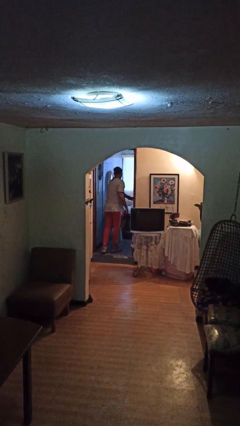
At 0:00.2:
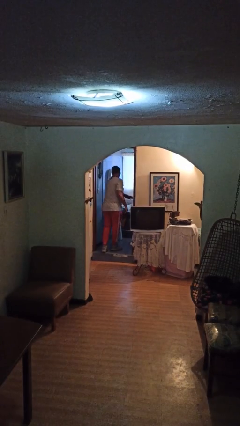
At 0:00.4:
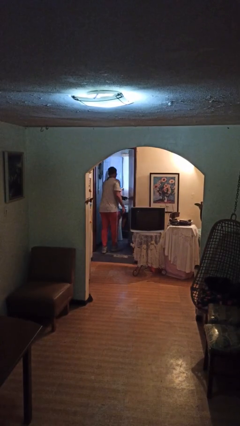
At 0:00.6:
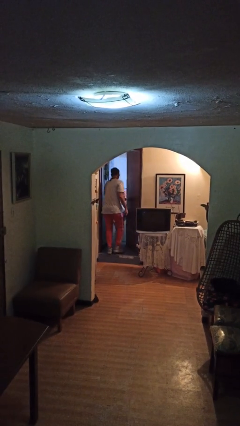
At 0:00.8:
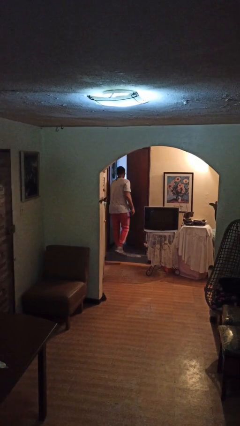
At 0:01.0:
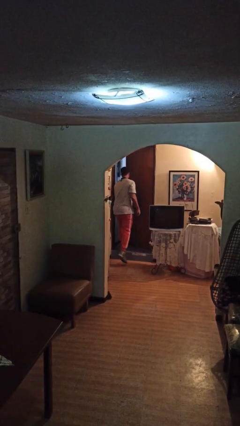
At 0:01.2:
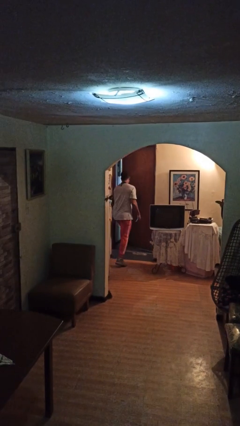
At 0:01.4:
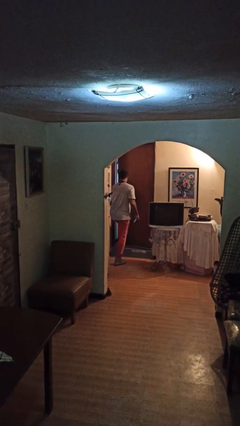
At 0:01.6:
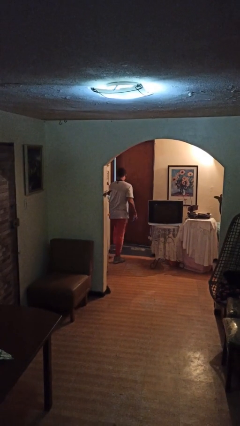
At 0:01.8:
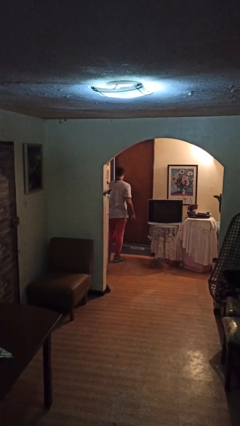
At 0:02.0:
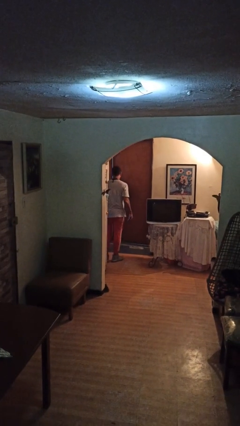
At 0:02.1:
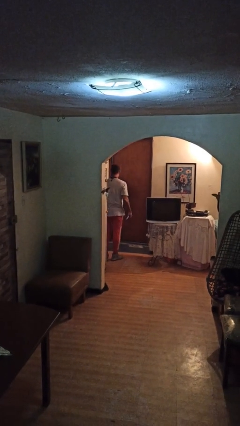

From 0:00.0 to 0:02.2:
person closes facility door

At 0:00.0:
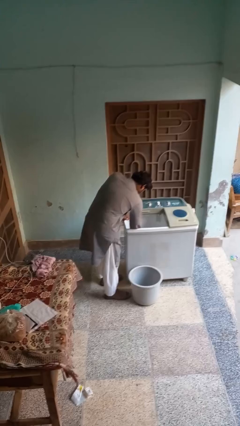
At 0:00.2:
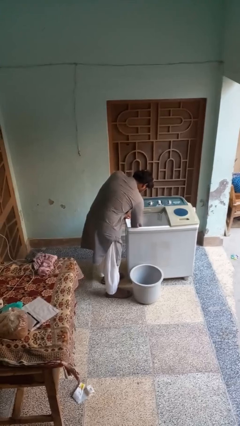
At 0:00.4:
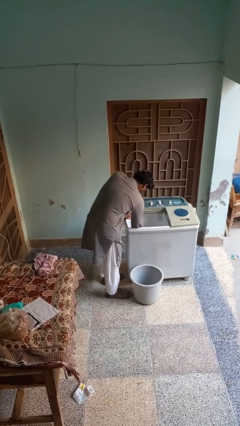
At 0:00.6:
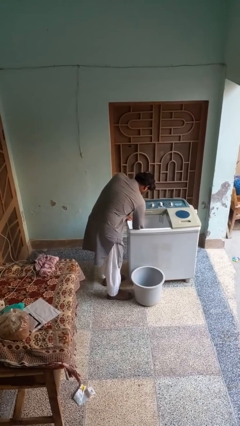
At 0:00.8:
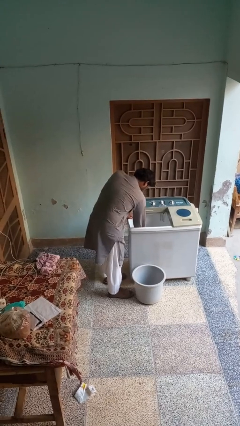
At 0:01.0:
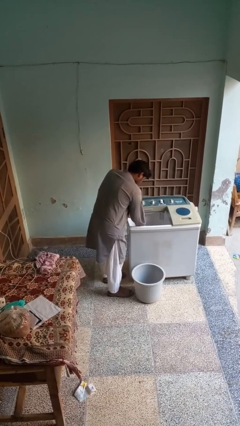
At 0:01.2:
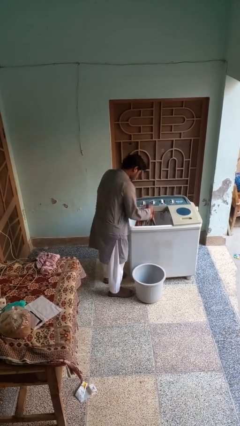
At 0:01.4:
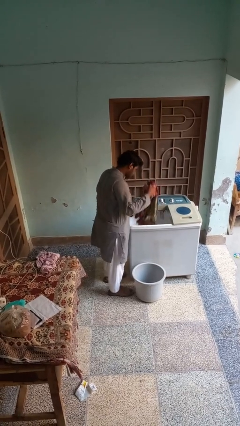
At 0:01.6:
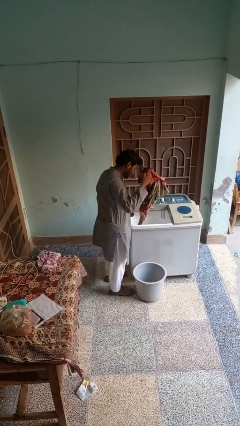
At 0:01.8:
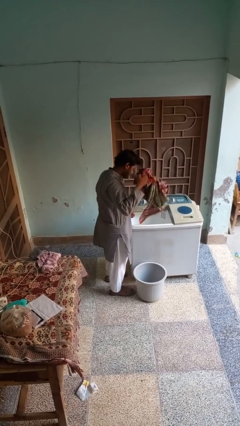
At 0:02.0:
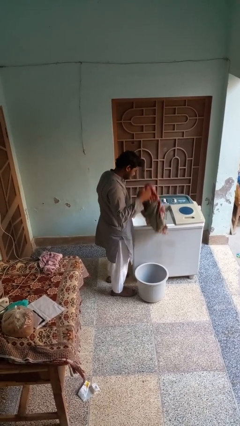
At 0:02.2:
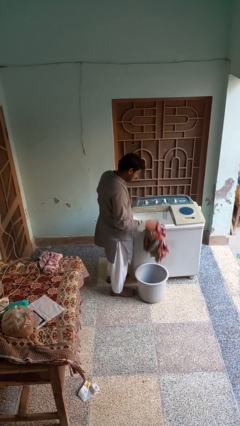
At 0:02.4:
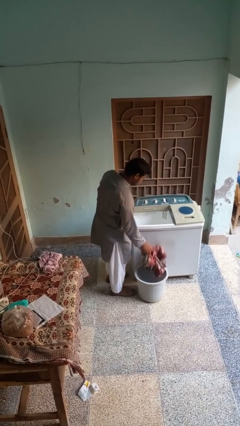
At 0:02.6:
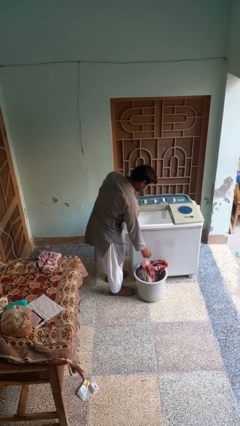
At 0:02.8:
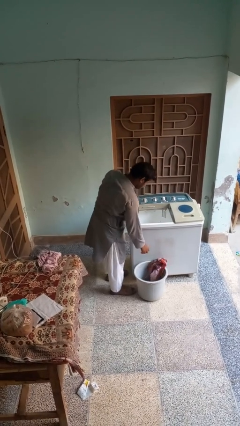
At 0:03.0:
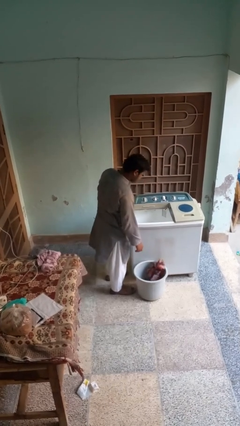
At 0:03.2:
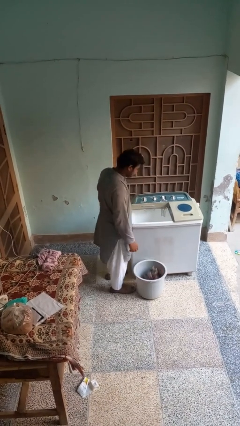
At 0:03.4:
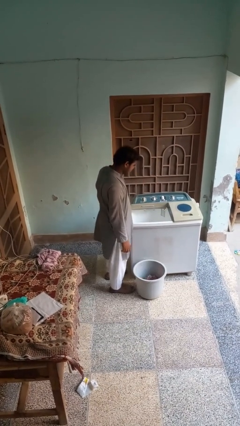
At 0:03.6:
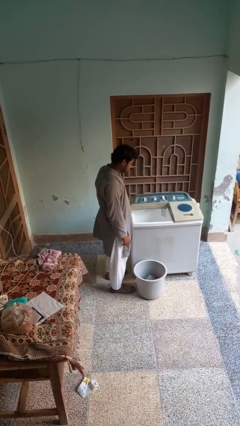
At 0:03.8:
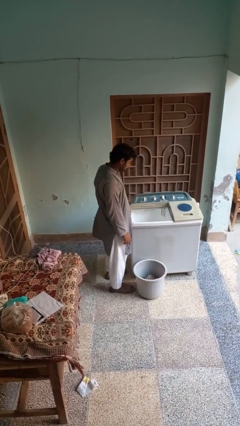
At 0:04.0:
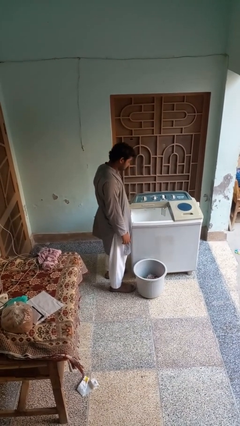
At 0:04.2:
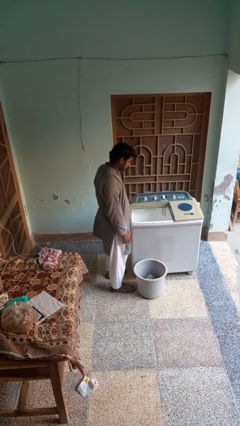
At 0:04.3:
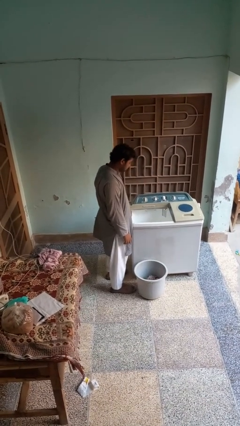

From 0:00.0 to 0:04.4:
person unloads clotheswasher

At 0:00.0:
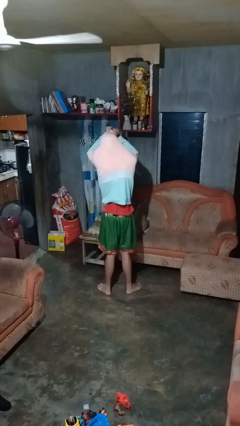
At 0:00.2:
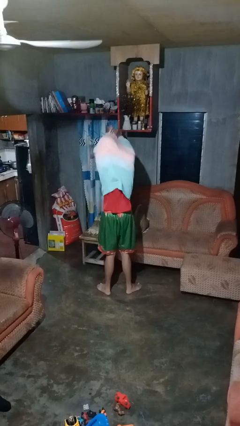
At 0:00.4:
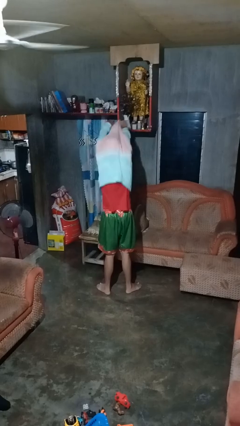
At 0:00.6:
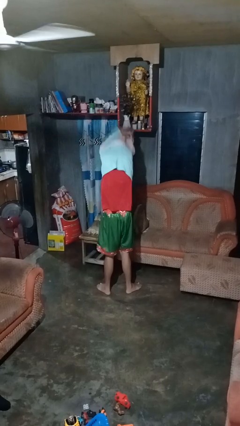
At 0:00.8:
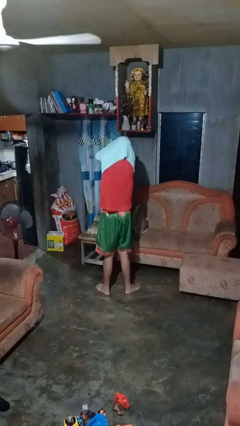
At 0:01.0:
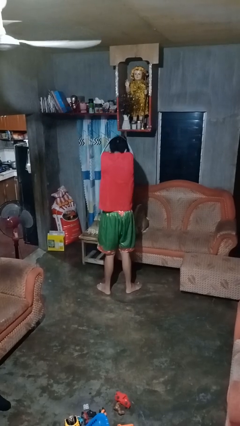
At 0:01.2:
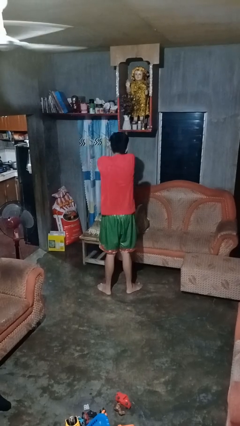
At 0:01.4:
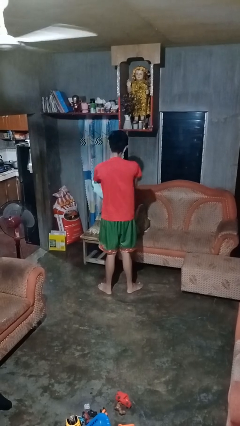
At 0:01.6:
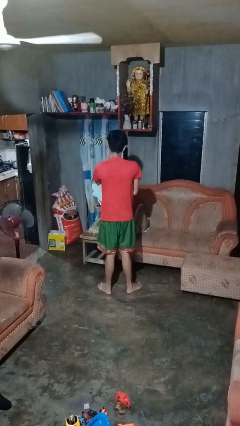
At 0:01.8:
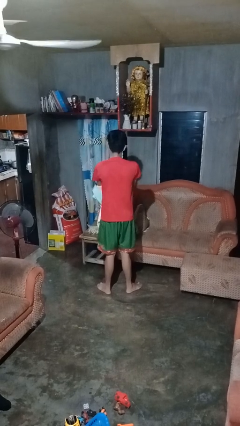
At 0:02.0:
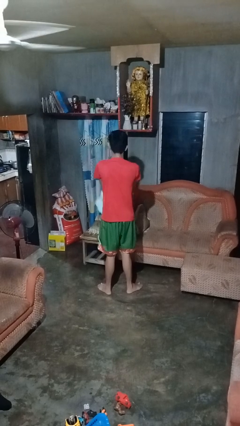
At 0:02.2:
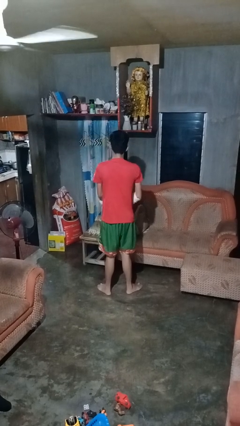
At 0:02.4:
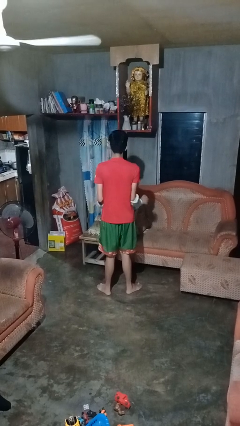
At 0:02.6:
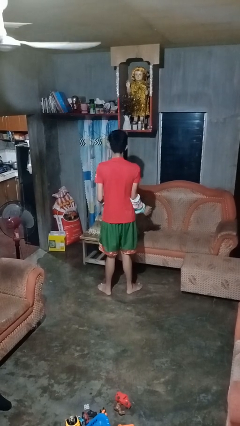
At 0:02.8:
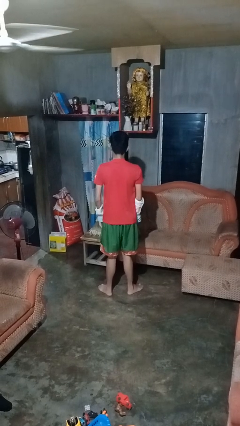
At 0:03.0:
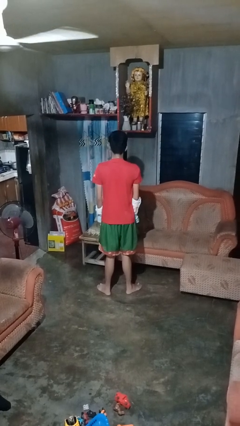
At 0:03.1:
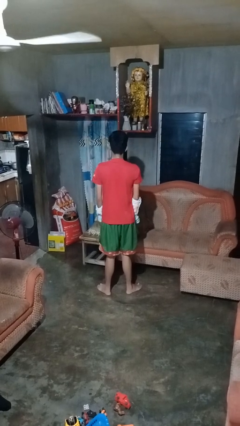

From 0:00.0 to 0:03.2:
person takes off hoodie

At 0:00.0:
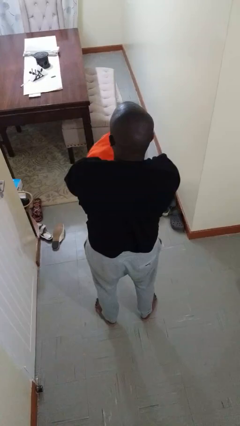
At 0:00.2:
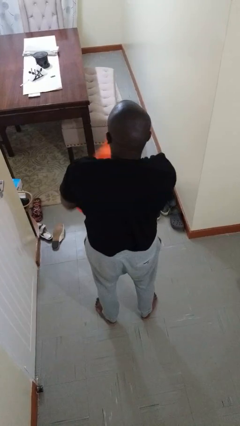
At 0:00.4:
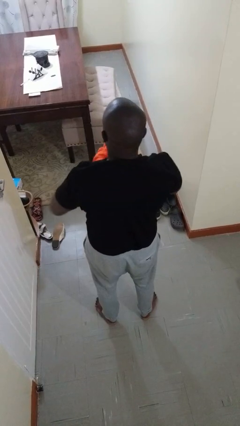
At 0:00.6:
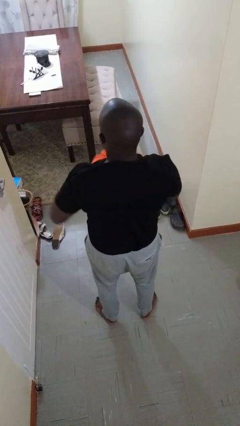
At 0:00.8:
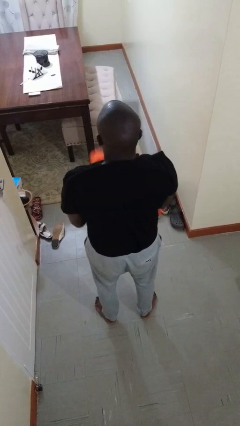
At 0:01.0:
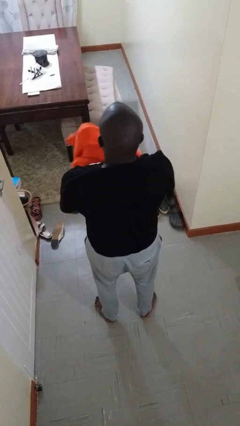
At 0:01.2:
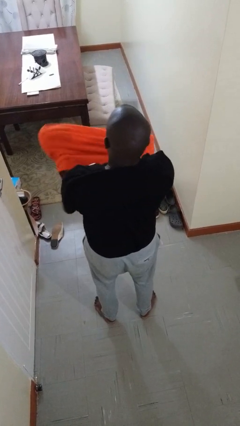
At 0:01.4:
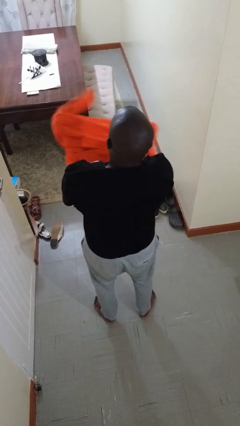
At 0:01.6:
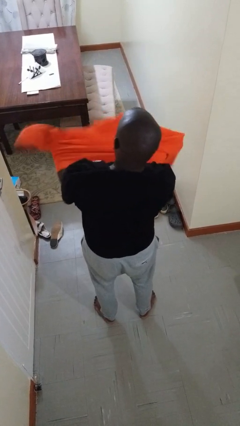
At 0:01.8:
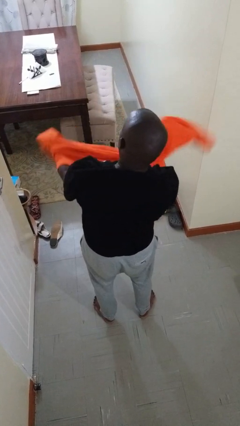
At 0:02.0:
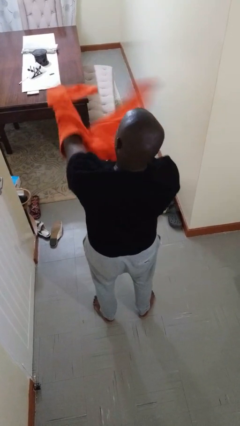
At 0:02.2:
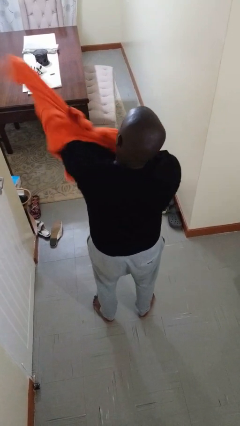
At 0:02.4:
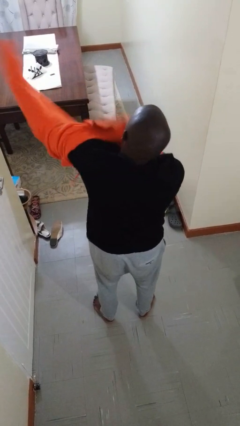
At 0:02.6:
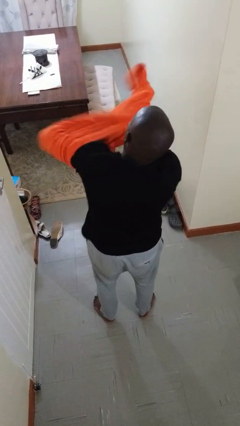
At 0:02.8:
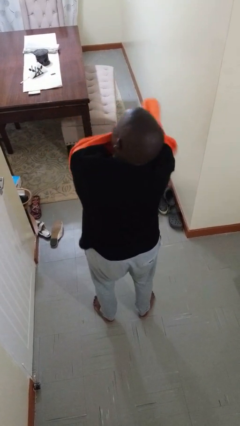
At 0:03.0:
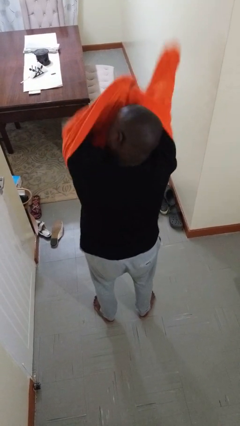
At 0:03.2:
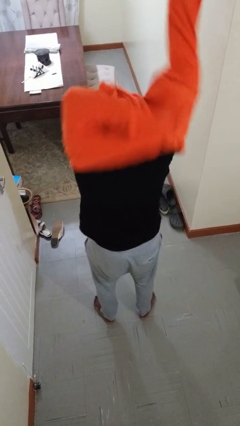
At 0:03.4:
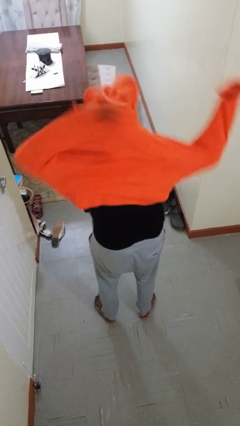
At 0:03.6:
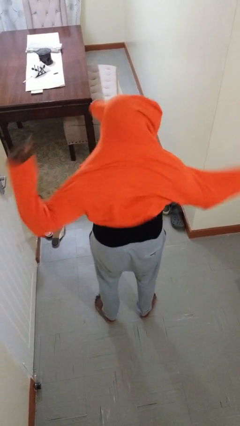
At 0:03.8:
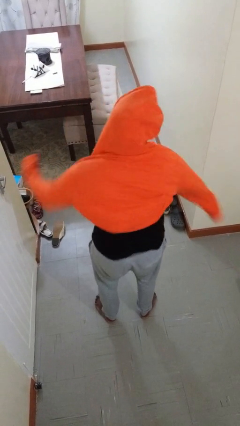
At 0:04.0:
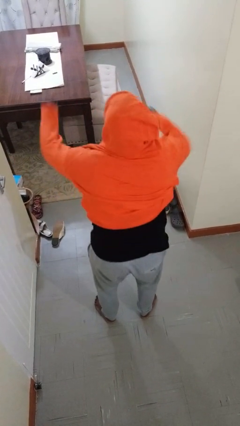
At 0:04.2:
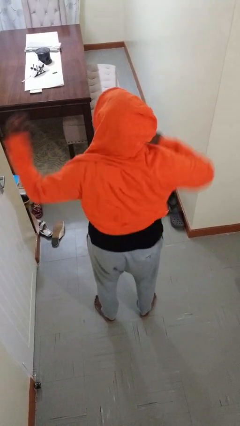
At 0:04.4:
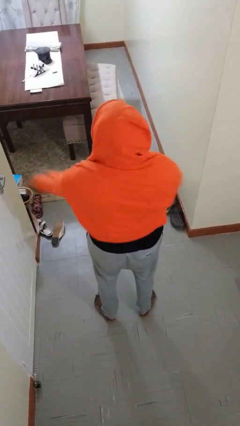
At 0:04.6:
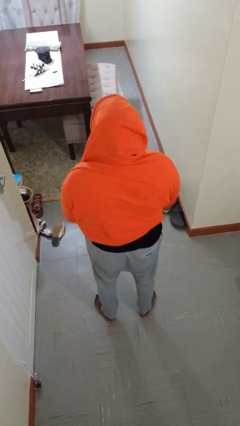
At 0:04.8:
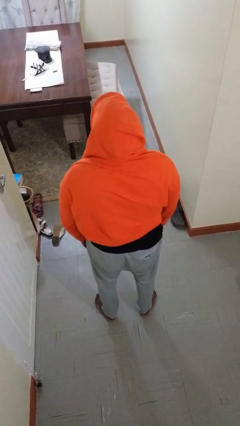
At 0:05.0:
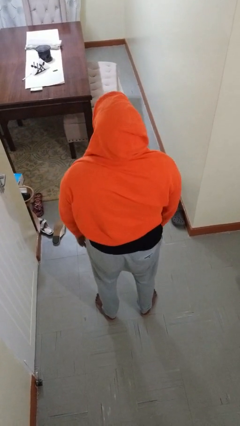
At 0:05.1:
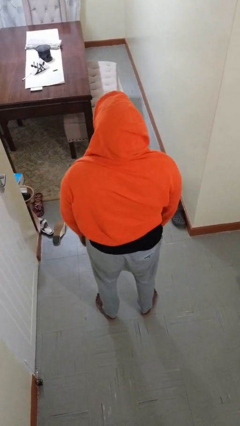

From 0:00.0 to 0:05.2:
person puts on hoodie

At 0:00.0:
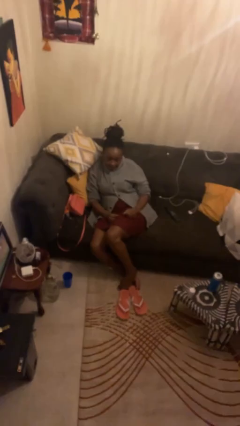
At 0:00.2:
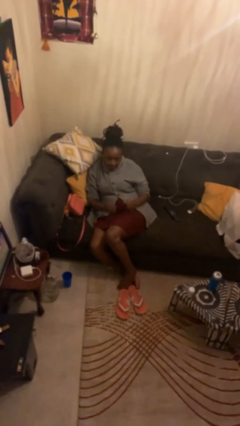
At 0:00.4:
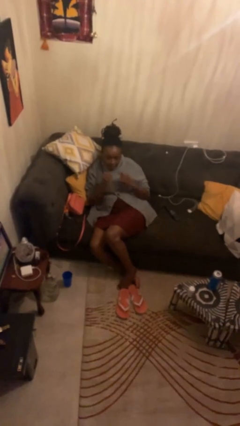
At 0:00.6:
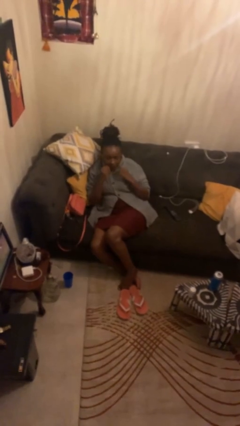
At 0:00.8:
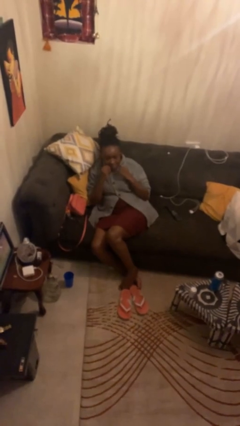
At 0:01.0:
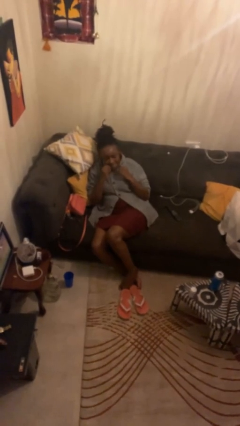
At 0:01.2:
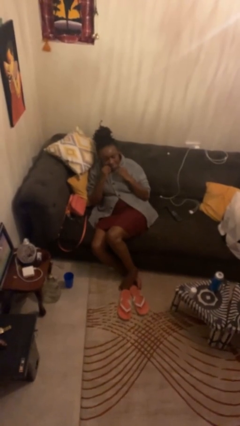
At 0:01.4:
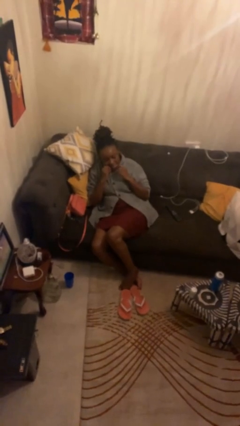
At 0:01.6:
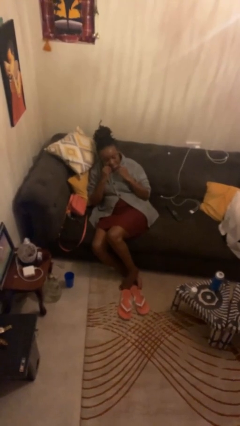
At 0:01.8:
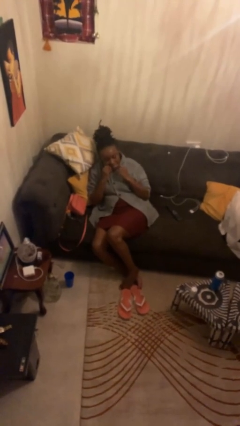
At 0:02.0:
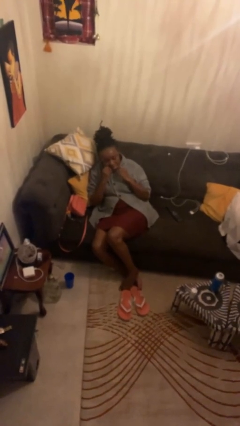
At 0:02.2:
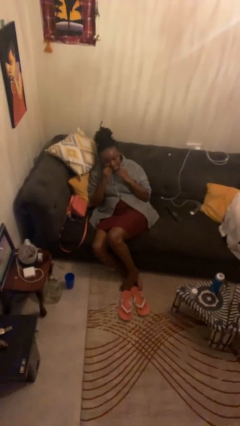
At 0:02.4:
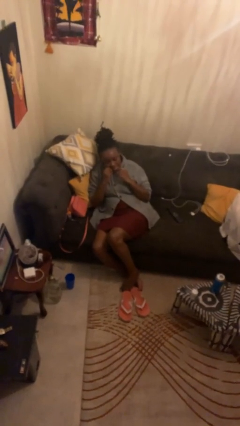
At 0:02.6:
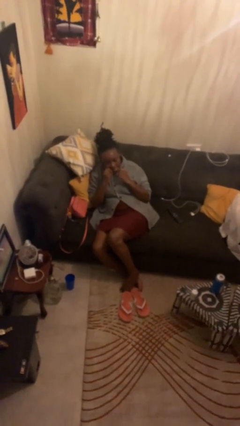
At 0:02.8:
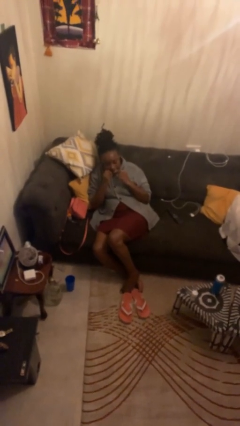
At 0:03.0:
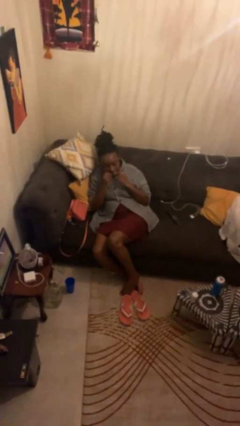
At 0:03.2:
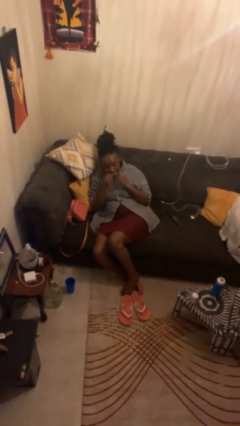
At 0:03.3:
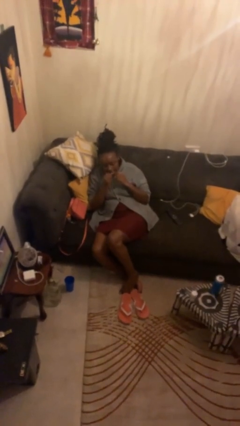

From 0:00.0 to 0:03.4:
person flosses
